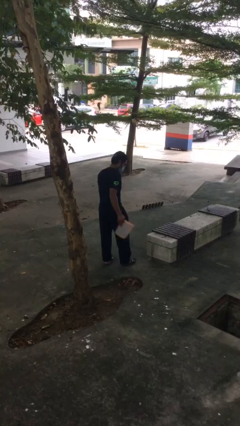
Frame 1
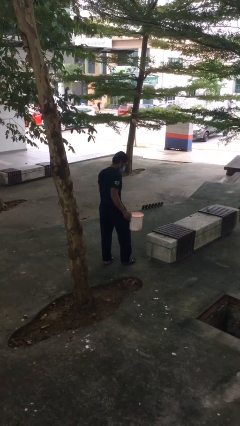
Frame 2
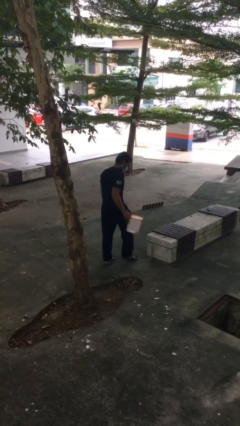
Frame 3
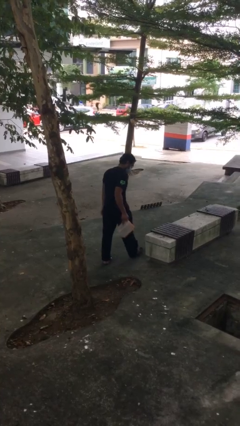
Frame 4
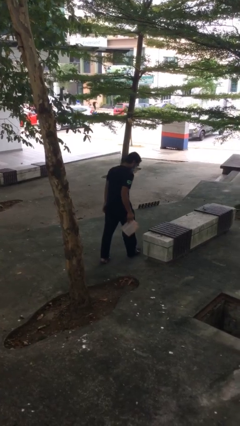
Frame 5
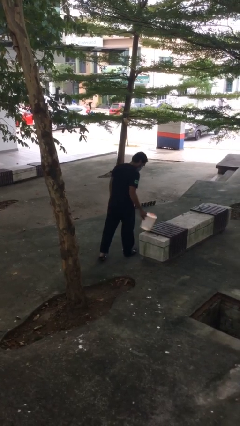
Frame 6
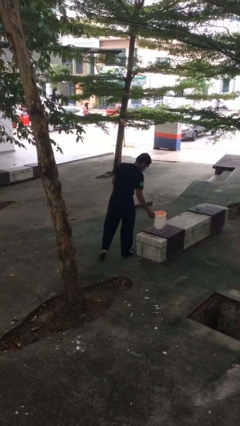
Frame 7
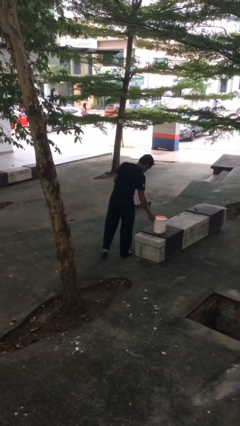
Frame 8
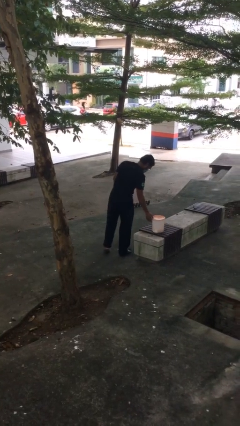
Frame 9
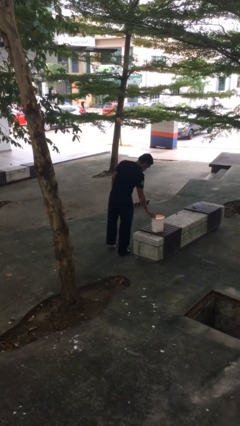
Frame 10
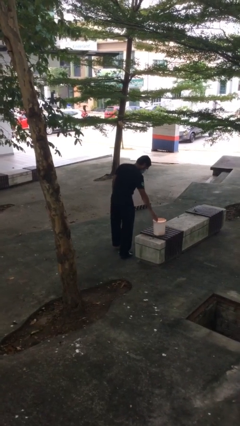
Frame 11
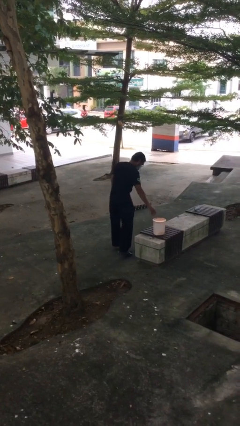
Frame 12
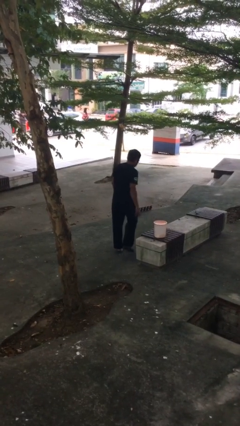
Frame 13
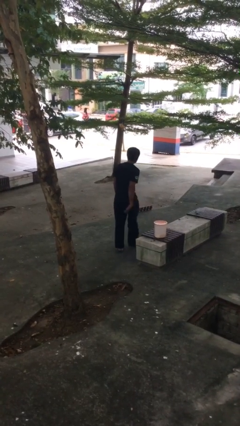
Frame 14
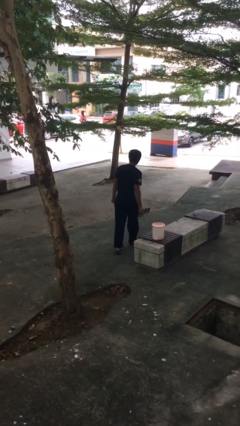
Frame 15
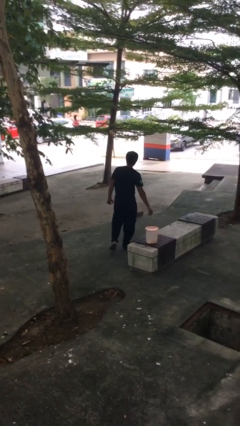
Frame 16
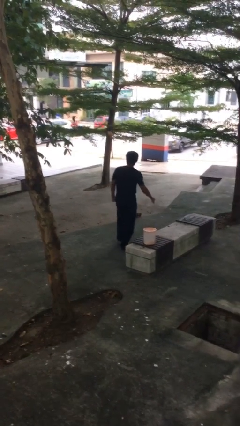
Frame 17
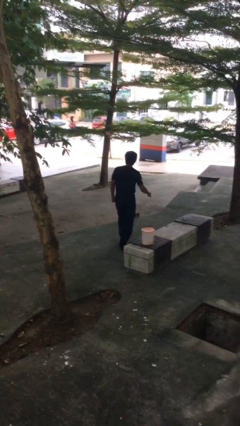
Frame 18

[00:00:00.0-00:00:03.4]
person puts down object on table

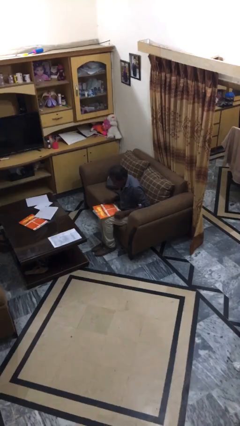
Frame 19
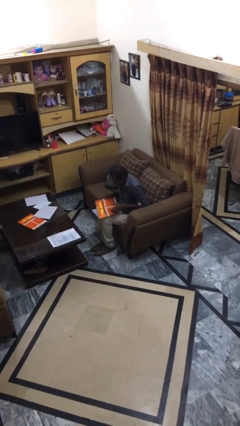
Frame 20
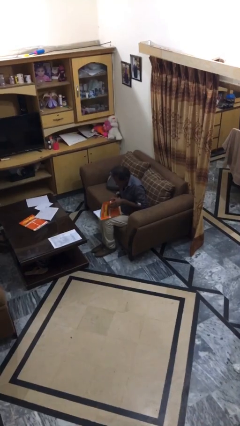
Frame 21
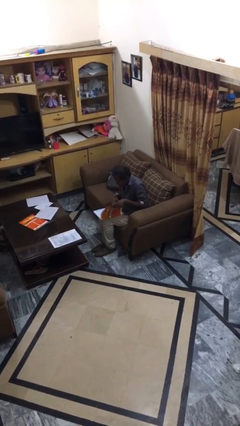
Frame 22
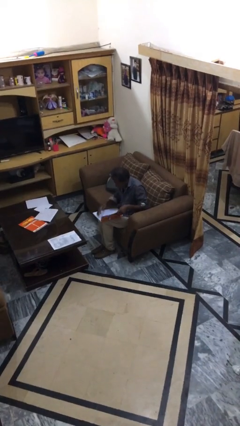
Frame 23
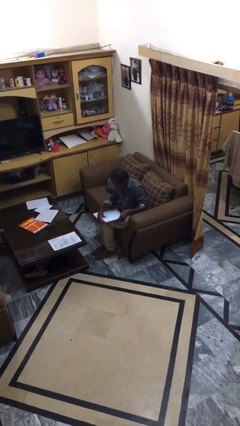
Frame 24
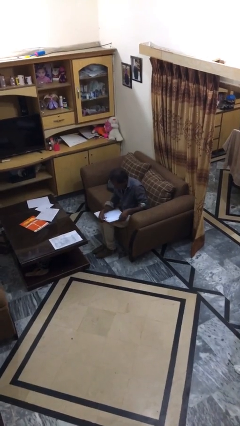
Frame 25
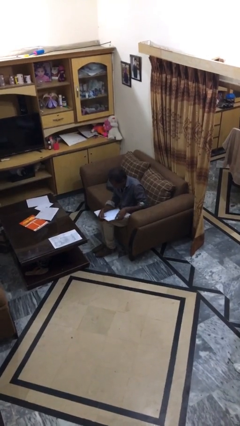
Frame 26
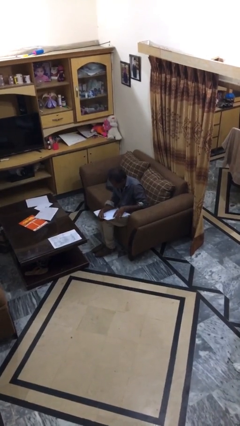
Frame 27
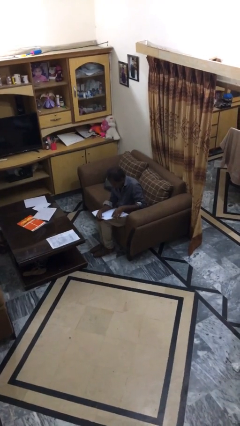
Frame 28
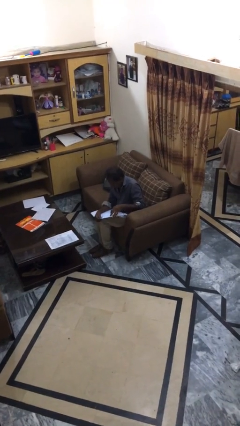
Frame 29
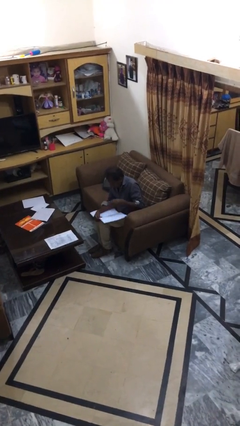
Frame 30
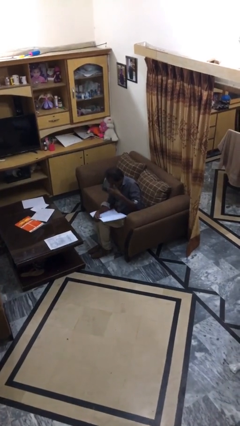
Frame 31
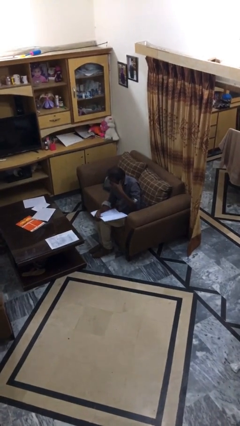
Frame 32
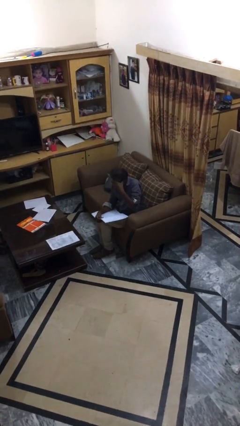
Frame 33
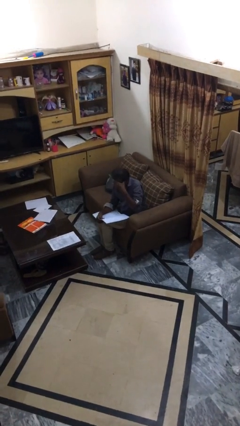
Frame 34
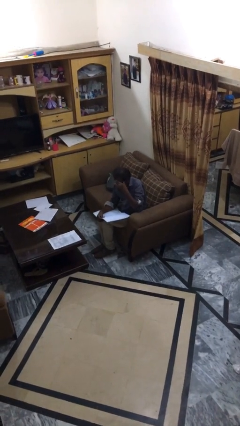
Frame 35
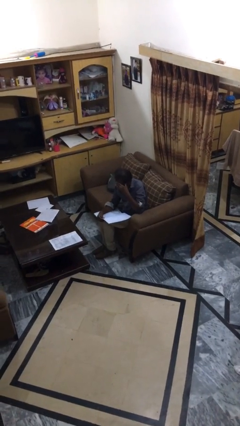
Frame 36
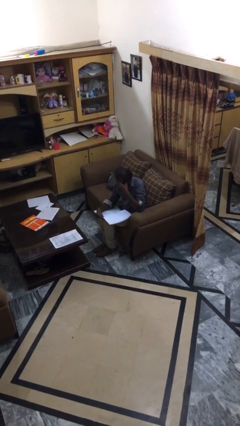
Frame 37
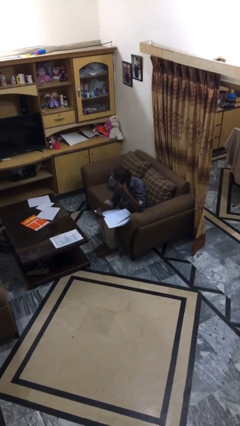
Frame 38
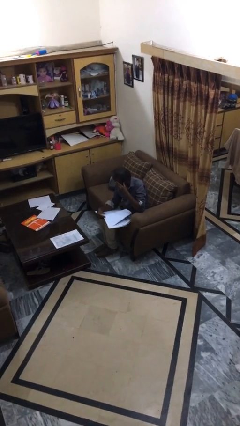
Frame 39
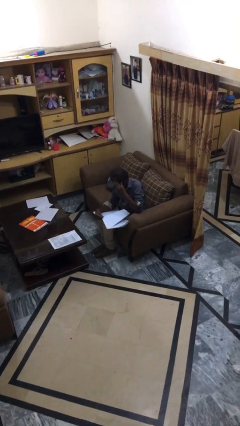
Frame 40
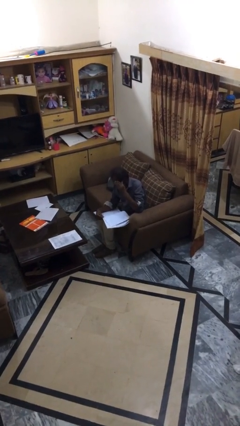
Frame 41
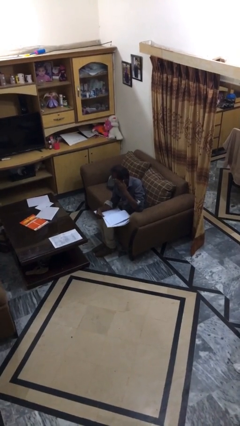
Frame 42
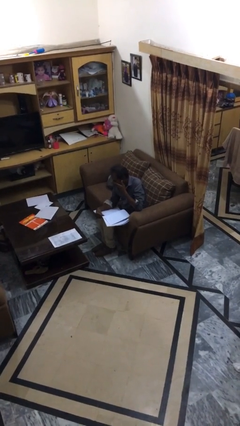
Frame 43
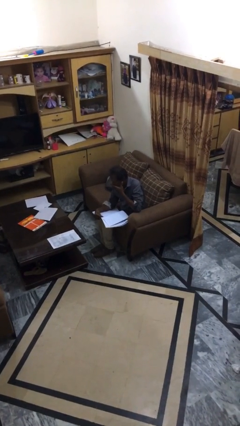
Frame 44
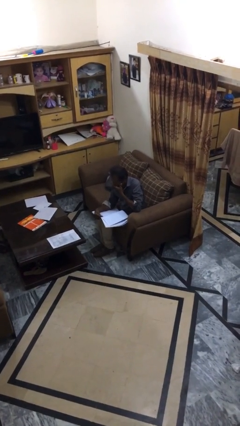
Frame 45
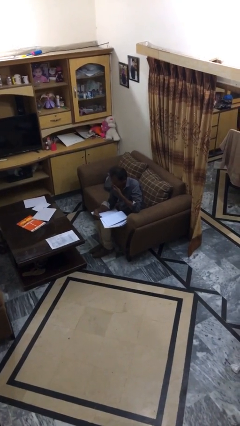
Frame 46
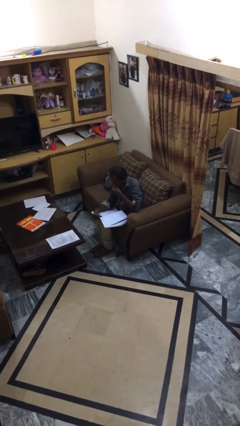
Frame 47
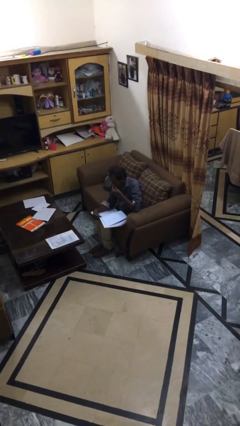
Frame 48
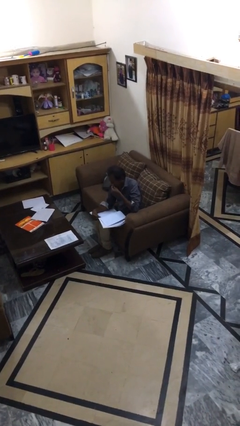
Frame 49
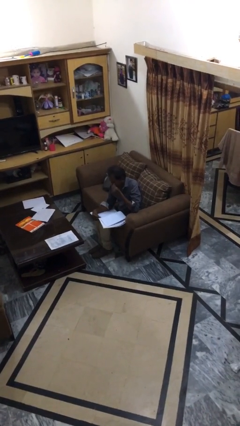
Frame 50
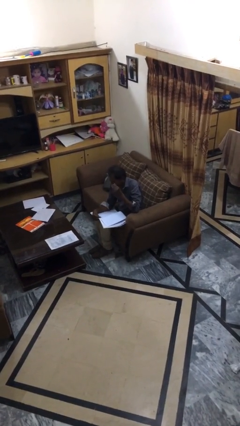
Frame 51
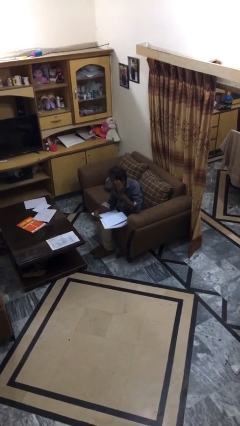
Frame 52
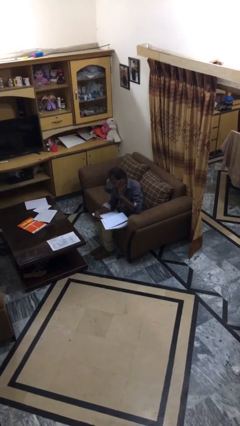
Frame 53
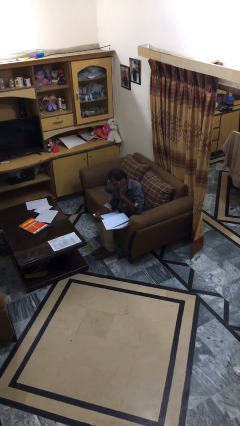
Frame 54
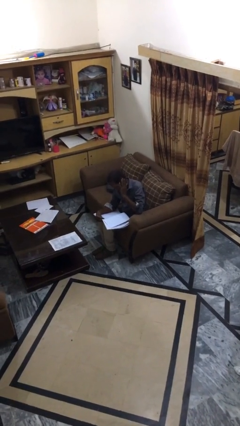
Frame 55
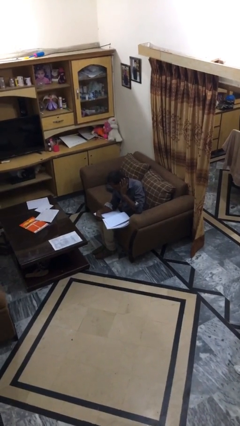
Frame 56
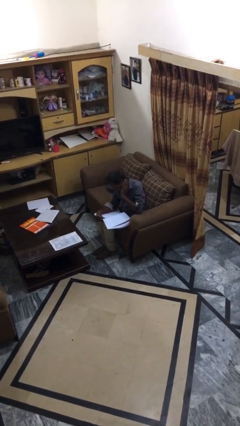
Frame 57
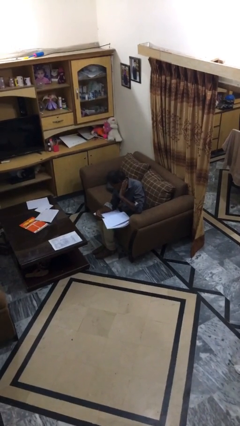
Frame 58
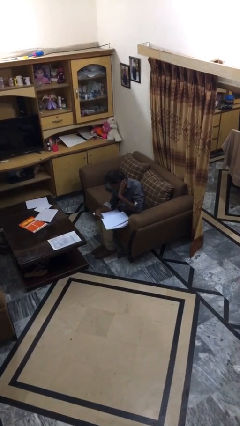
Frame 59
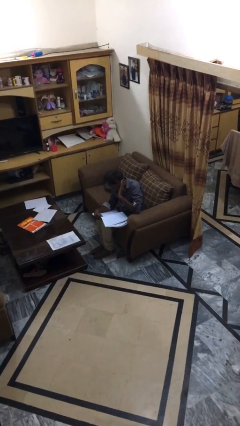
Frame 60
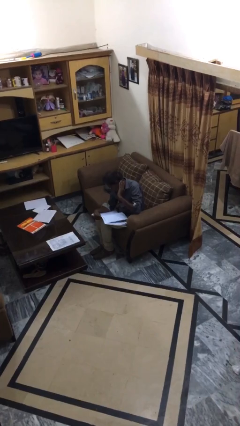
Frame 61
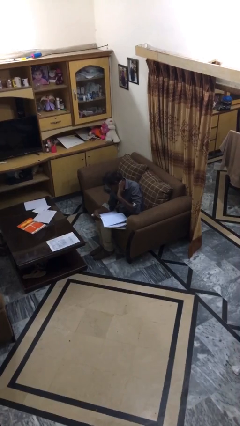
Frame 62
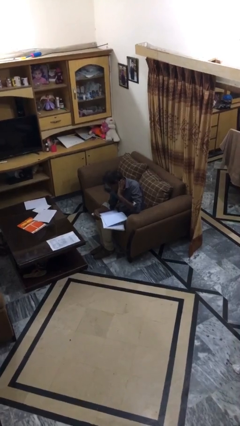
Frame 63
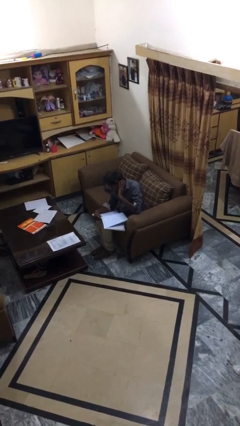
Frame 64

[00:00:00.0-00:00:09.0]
person reads document

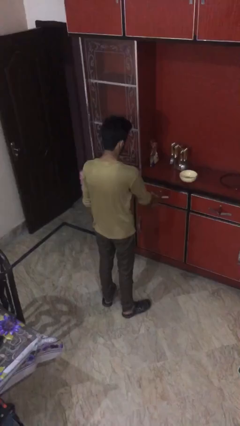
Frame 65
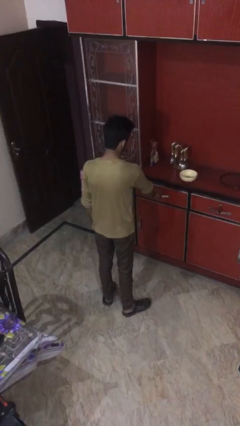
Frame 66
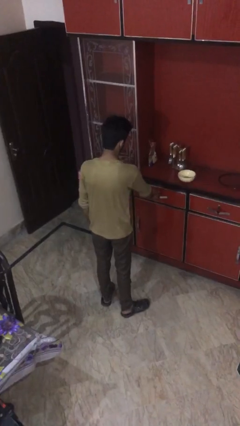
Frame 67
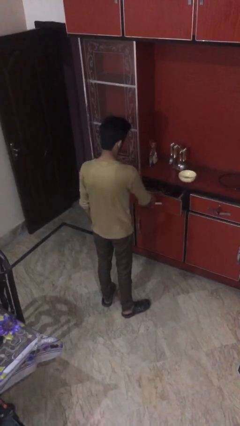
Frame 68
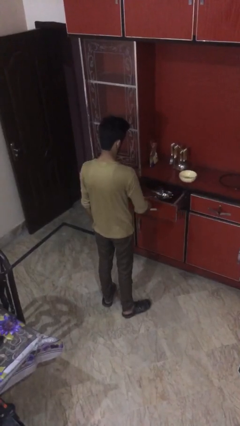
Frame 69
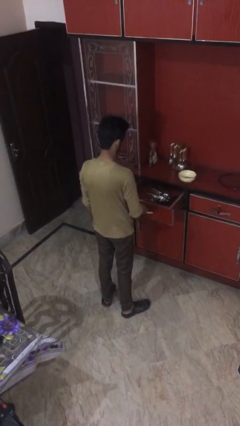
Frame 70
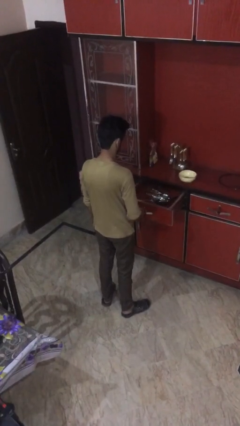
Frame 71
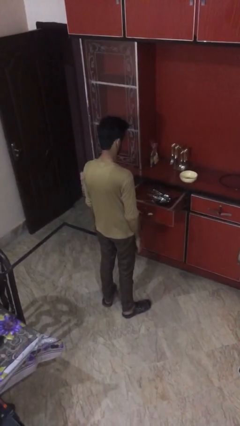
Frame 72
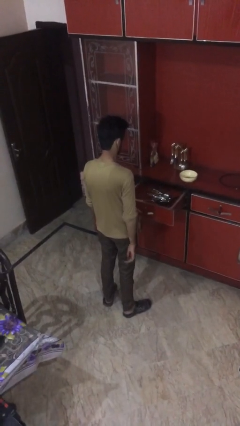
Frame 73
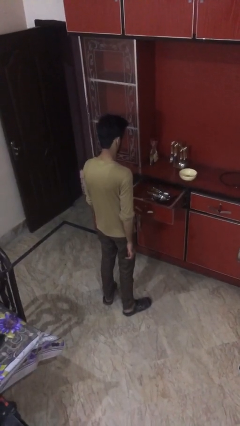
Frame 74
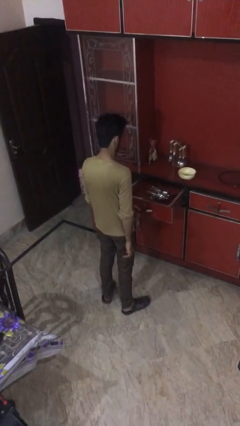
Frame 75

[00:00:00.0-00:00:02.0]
person opens kitchen drawer

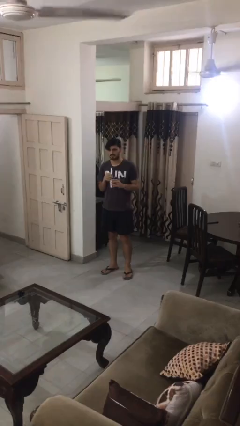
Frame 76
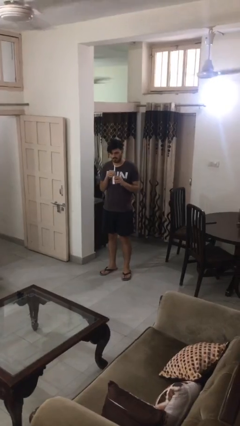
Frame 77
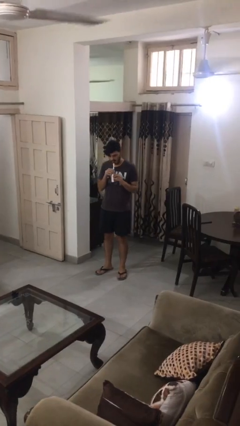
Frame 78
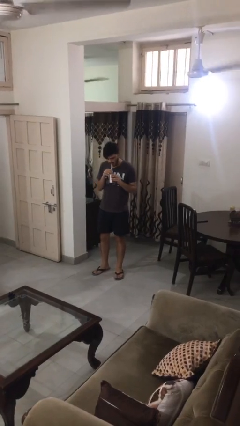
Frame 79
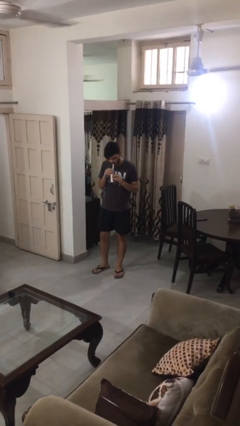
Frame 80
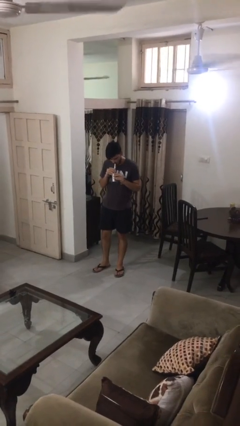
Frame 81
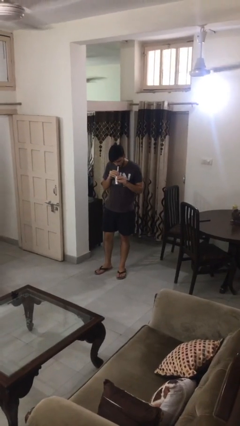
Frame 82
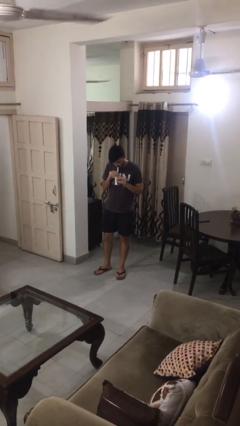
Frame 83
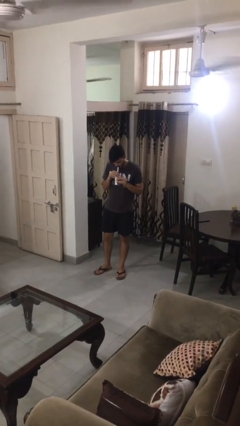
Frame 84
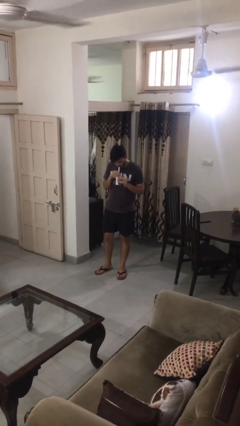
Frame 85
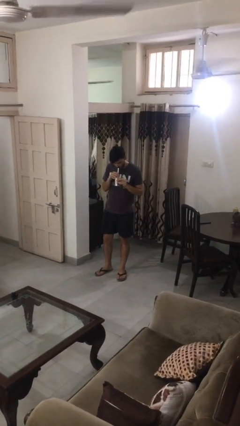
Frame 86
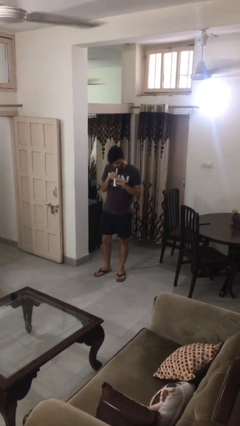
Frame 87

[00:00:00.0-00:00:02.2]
person drinks from straw

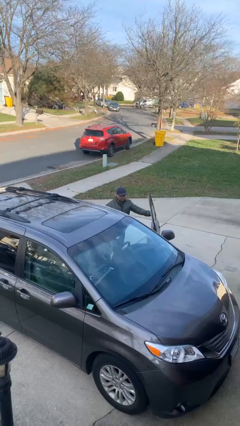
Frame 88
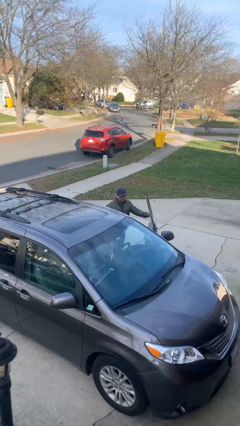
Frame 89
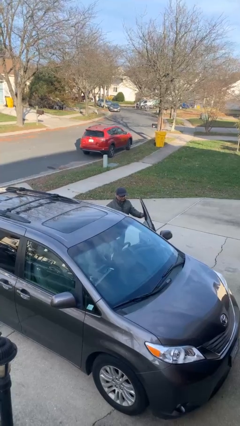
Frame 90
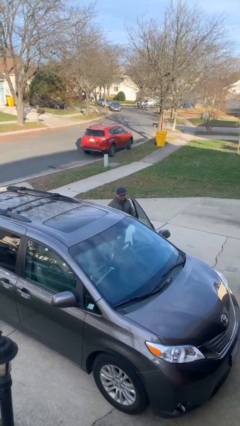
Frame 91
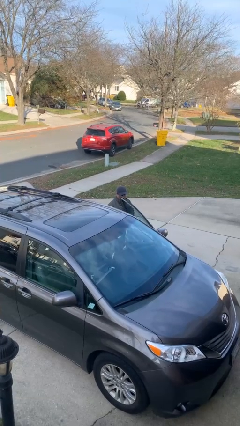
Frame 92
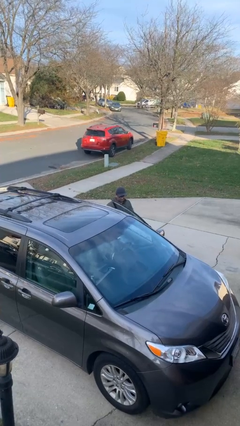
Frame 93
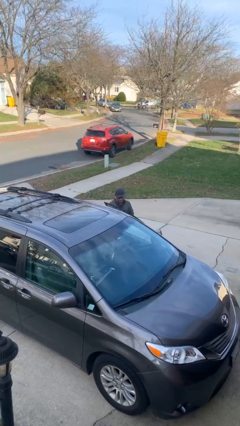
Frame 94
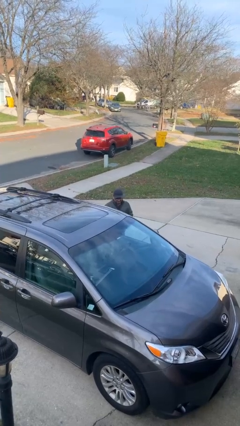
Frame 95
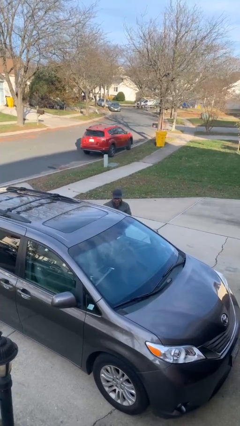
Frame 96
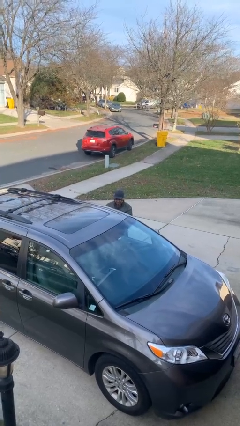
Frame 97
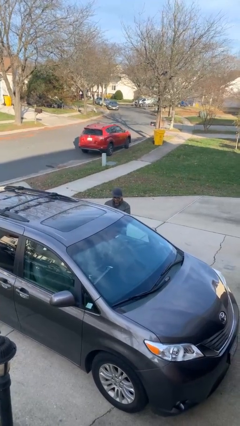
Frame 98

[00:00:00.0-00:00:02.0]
person closes car door
